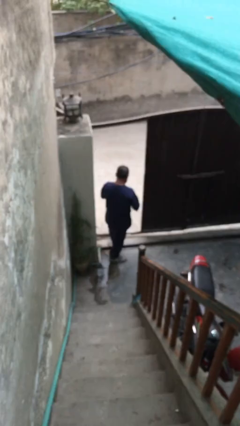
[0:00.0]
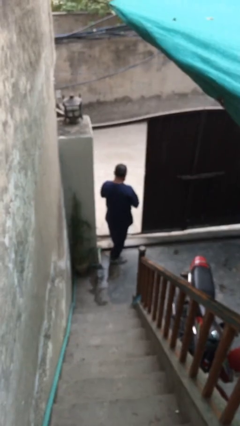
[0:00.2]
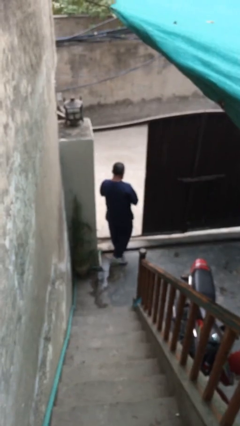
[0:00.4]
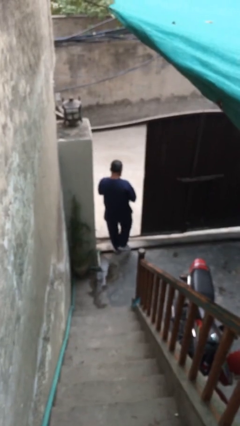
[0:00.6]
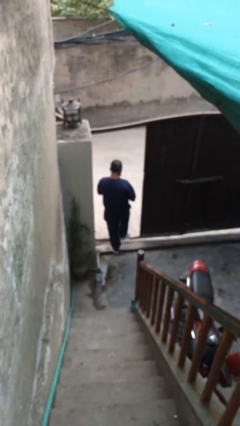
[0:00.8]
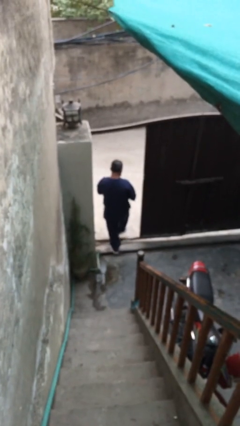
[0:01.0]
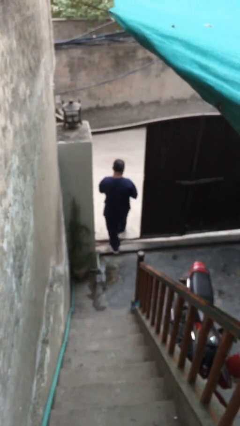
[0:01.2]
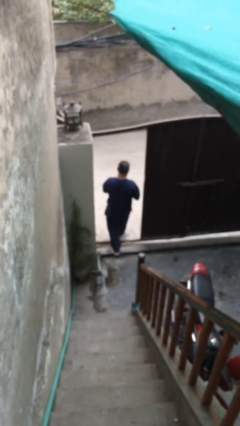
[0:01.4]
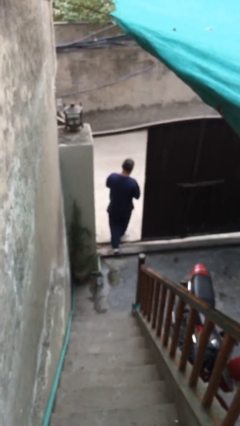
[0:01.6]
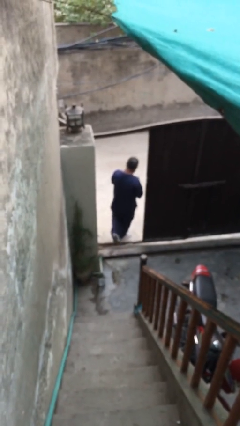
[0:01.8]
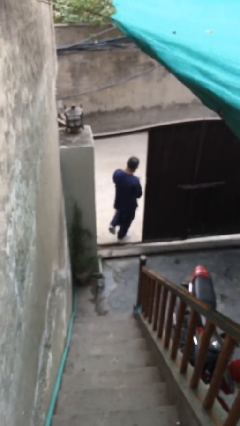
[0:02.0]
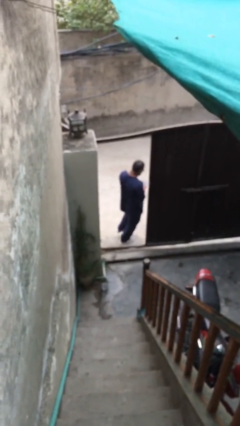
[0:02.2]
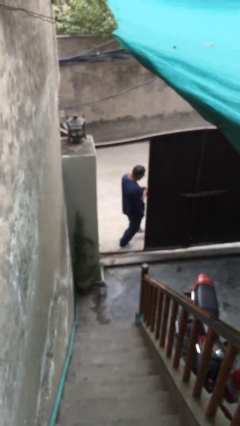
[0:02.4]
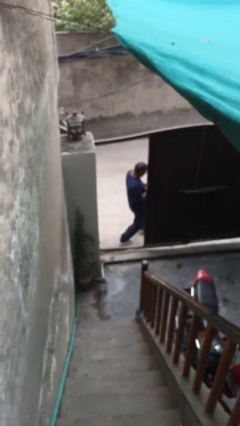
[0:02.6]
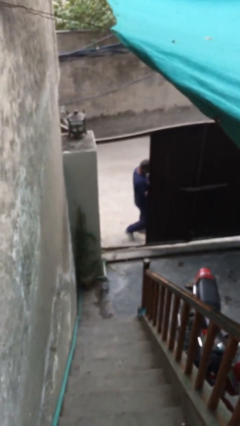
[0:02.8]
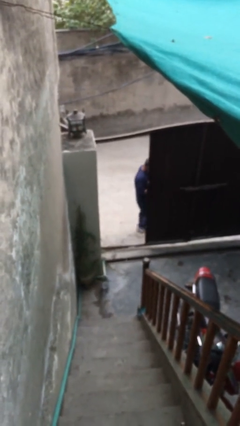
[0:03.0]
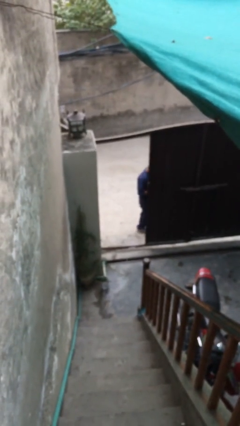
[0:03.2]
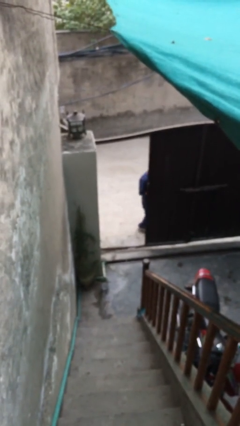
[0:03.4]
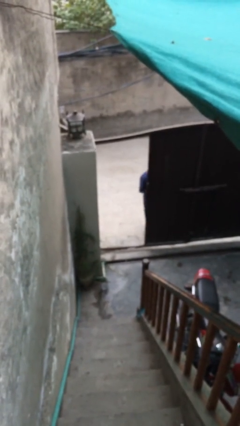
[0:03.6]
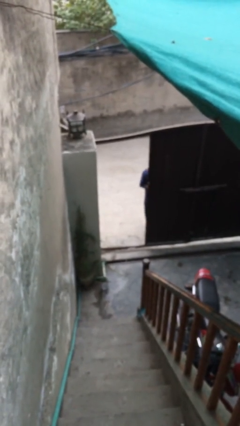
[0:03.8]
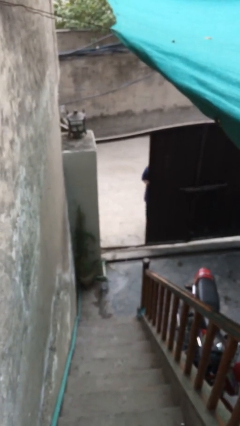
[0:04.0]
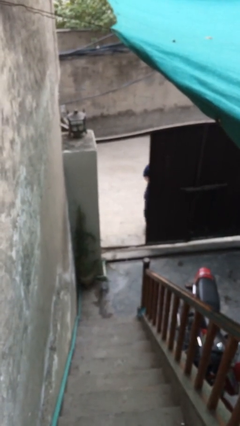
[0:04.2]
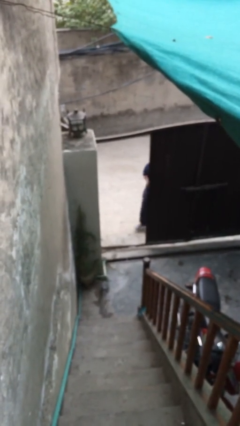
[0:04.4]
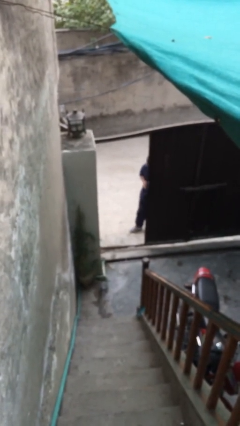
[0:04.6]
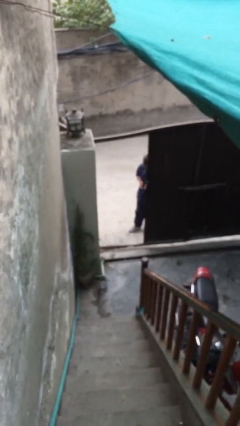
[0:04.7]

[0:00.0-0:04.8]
person exits scene through structure

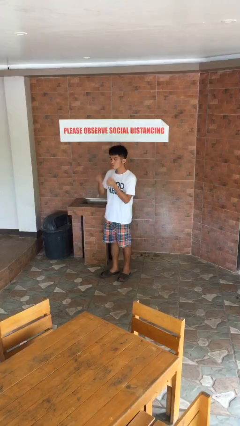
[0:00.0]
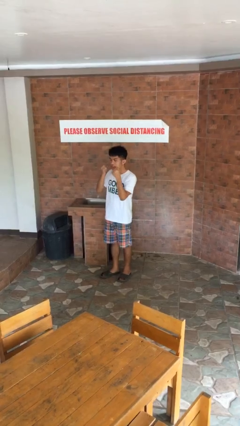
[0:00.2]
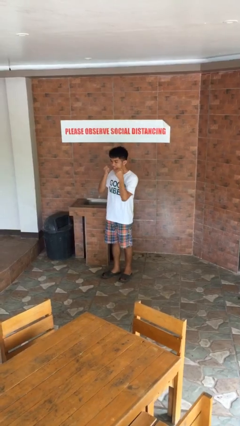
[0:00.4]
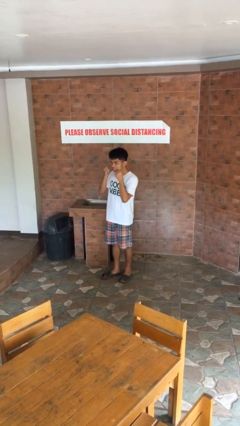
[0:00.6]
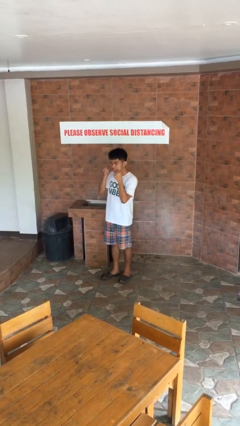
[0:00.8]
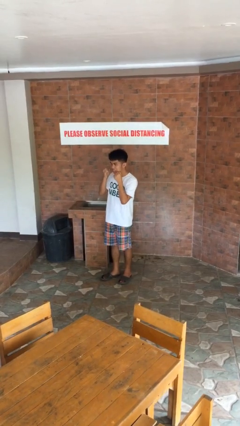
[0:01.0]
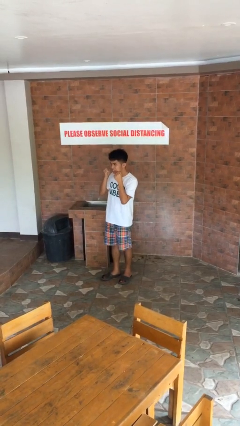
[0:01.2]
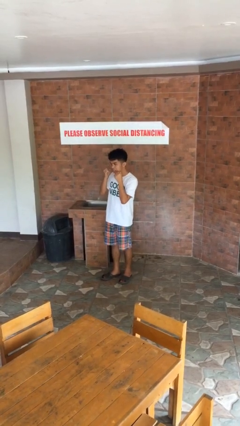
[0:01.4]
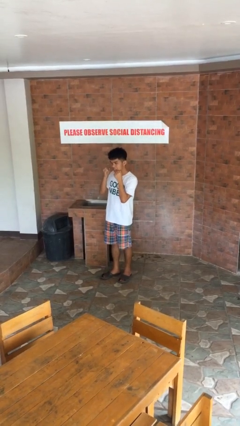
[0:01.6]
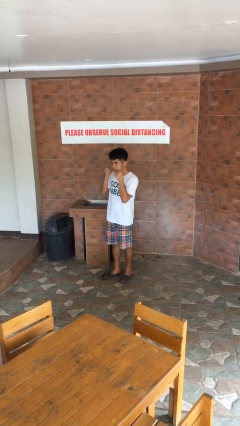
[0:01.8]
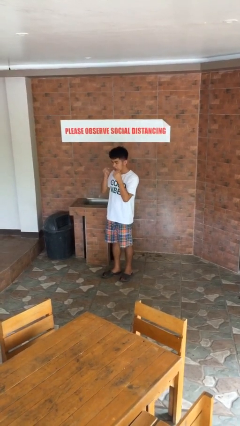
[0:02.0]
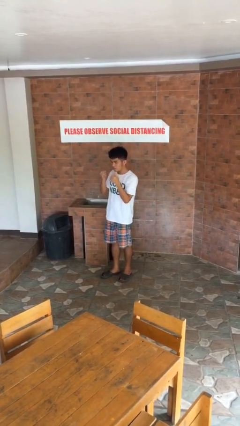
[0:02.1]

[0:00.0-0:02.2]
person flosses

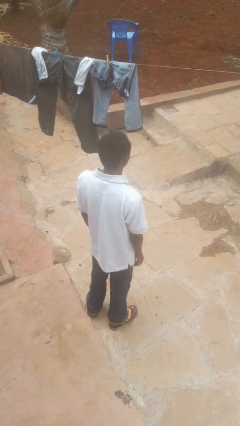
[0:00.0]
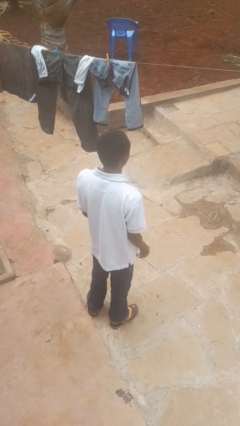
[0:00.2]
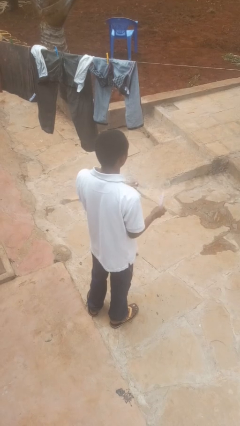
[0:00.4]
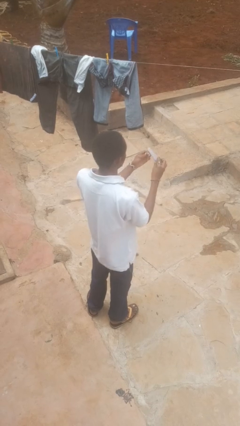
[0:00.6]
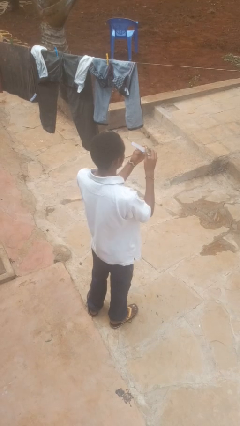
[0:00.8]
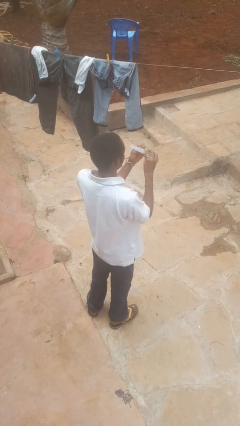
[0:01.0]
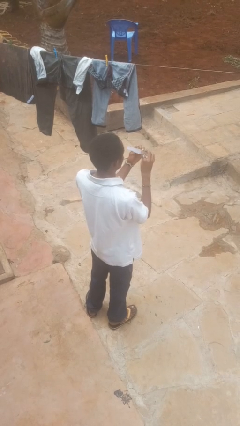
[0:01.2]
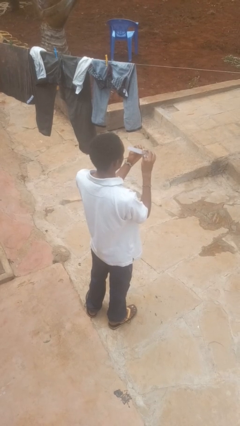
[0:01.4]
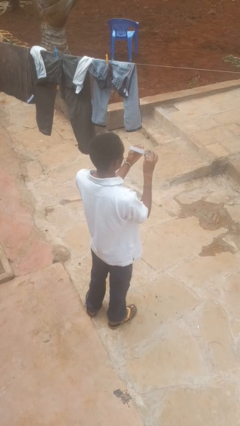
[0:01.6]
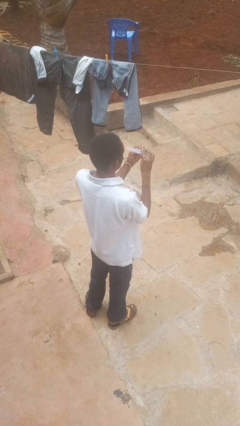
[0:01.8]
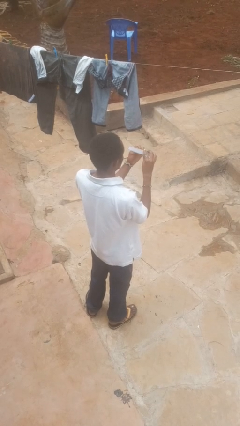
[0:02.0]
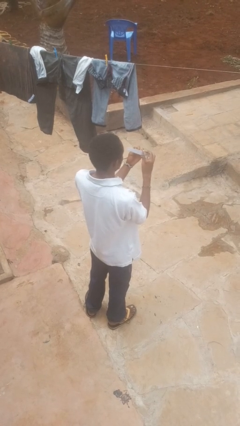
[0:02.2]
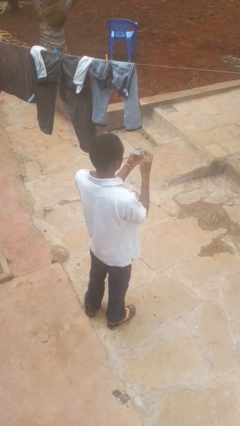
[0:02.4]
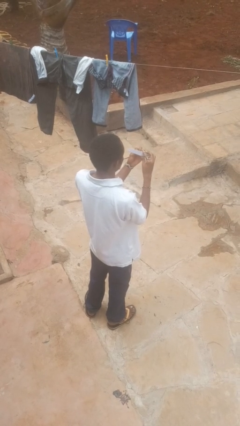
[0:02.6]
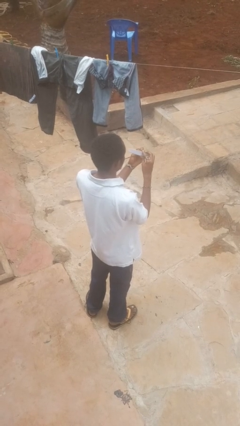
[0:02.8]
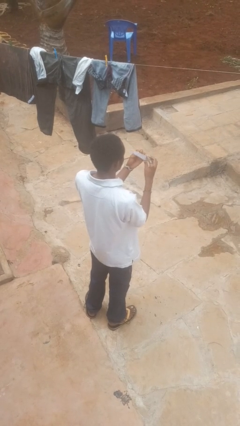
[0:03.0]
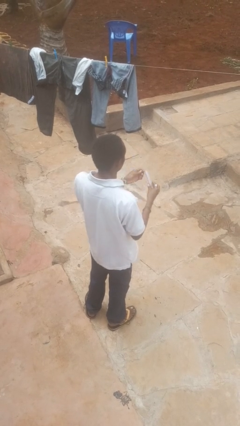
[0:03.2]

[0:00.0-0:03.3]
person files fingernails

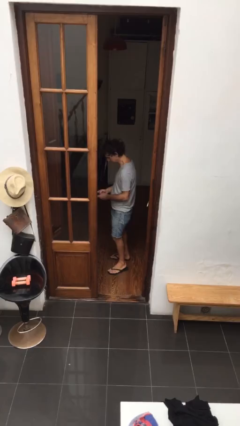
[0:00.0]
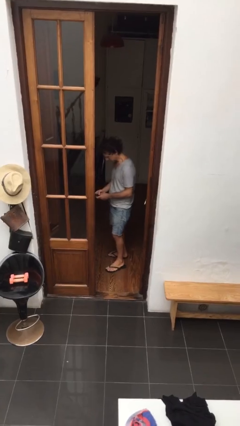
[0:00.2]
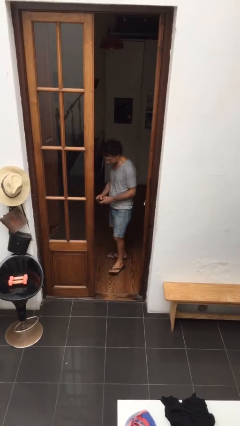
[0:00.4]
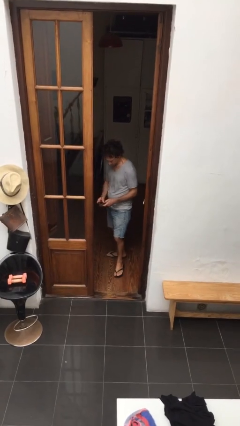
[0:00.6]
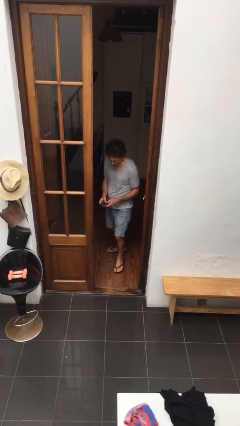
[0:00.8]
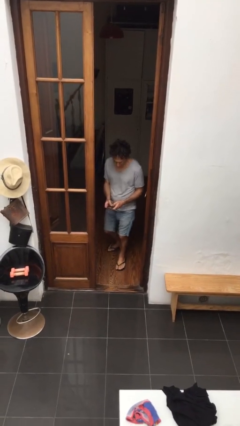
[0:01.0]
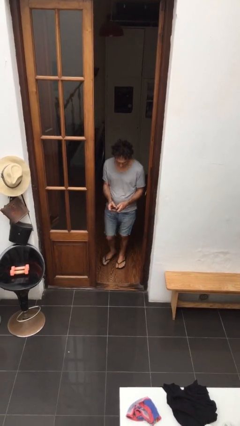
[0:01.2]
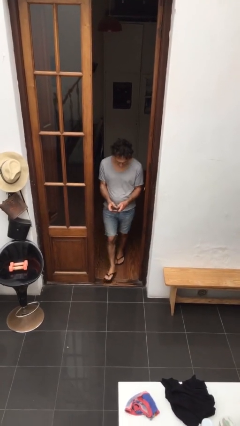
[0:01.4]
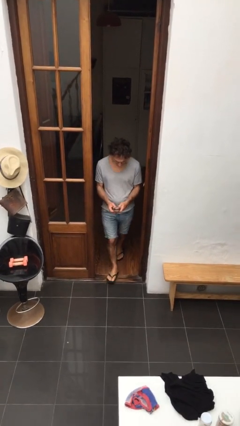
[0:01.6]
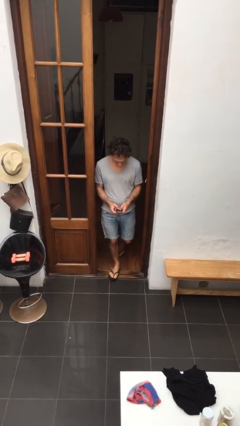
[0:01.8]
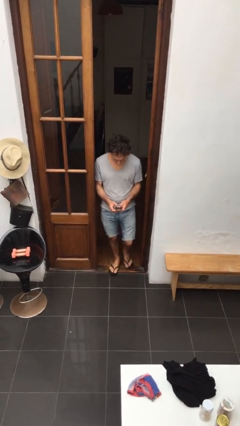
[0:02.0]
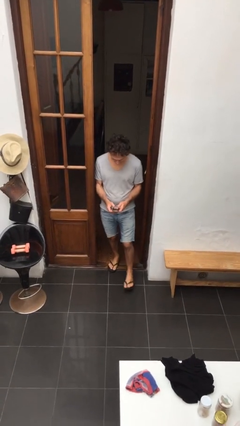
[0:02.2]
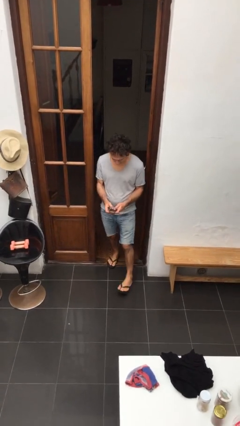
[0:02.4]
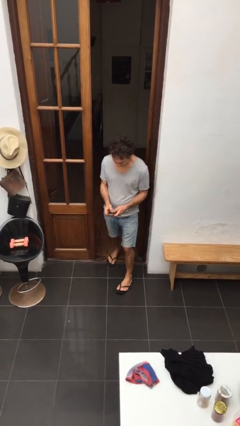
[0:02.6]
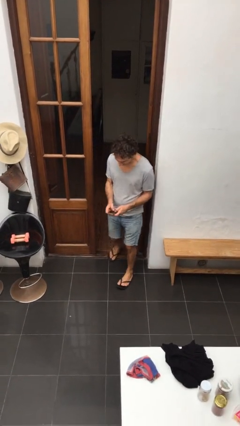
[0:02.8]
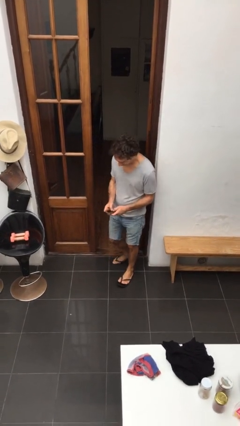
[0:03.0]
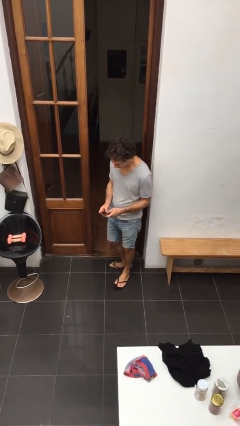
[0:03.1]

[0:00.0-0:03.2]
person enters scene through structure

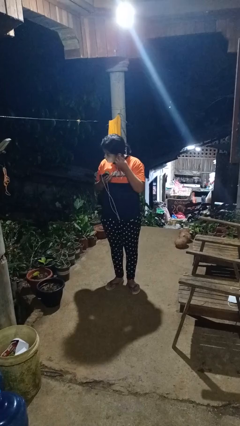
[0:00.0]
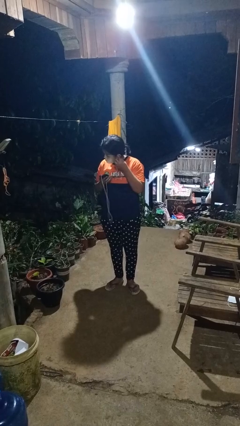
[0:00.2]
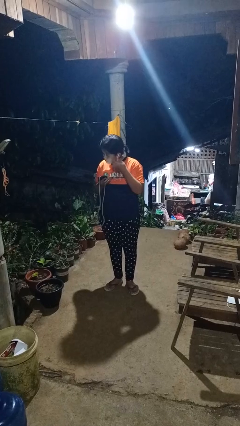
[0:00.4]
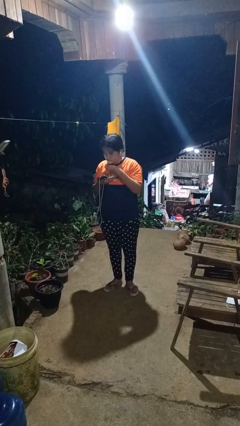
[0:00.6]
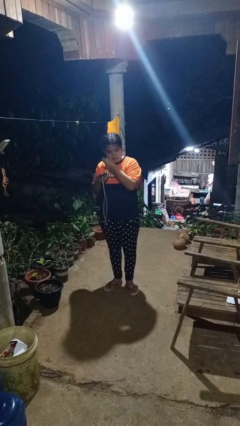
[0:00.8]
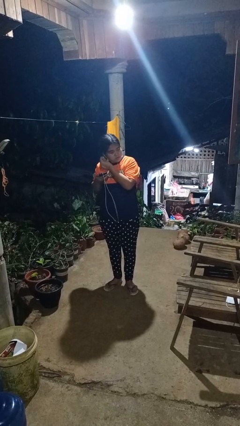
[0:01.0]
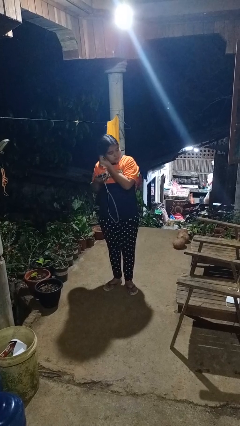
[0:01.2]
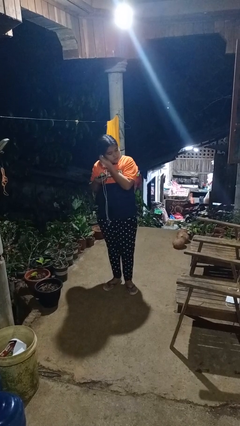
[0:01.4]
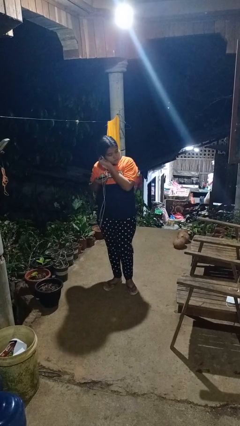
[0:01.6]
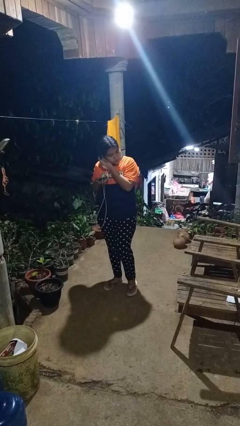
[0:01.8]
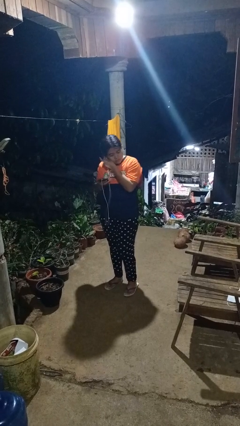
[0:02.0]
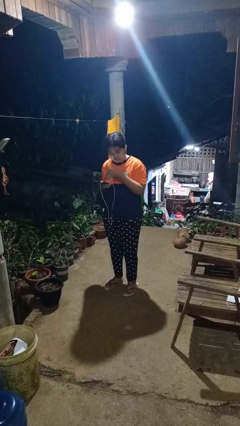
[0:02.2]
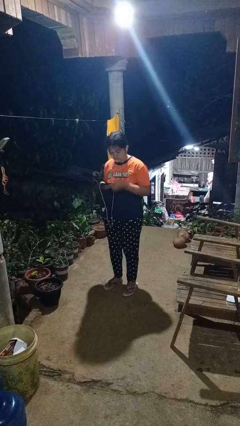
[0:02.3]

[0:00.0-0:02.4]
person puts on headphones

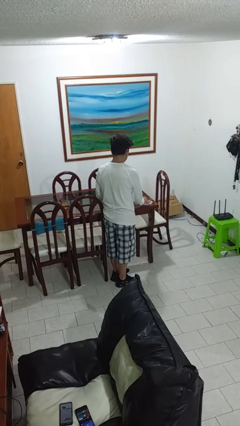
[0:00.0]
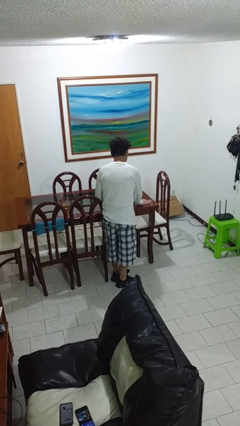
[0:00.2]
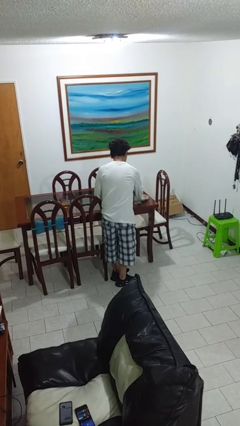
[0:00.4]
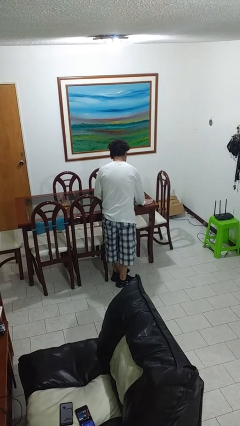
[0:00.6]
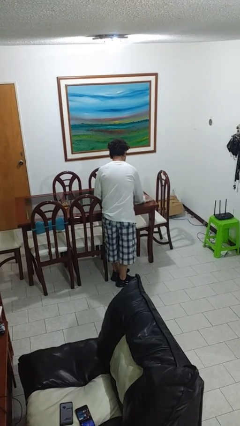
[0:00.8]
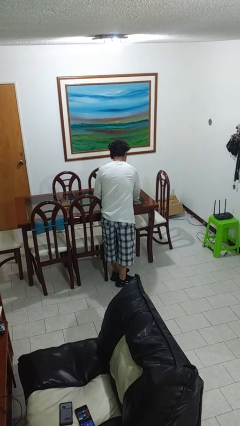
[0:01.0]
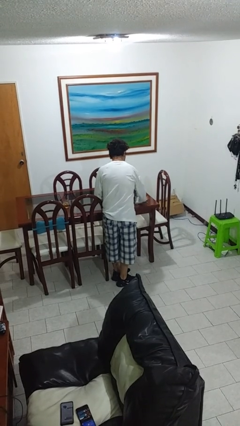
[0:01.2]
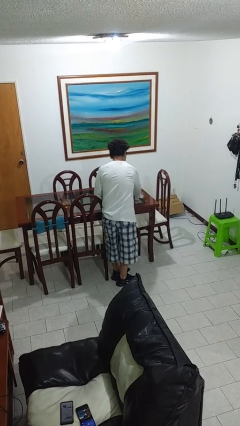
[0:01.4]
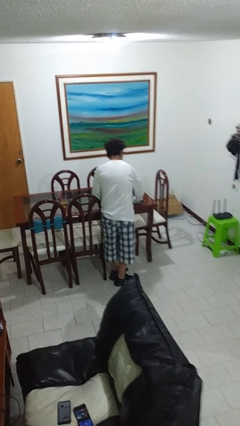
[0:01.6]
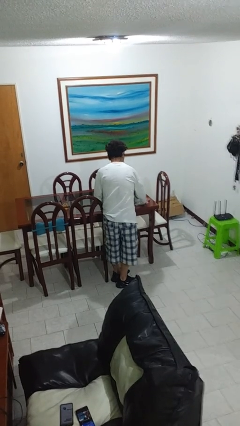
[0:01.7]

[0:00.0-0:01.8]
person cleans table with rag
